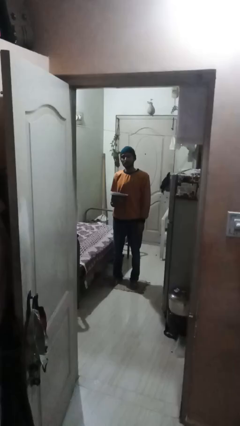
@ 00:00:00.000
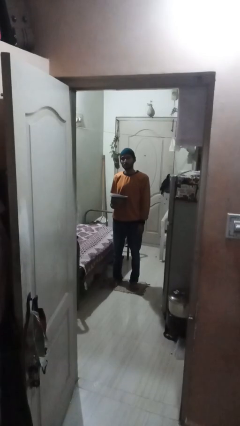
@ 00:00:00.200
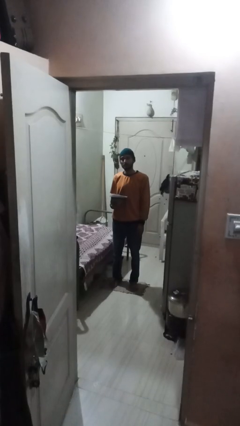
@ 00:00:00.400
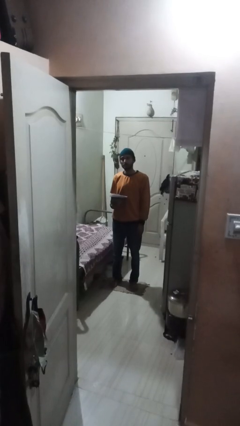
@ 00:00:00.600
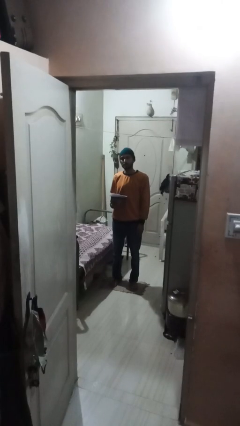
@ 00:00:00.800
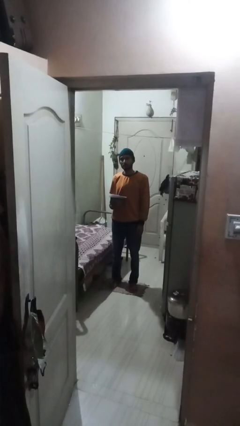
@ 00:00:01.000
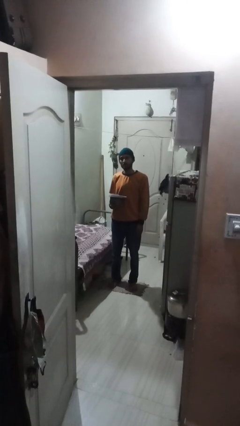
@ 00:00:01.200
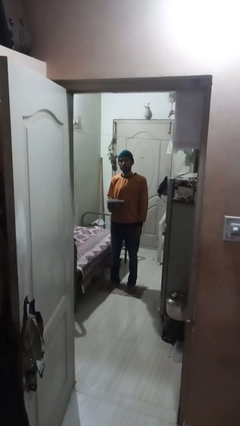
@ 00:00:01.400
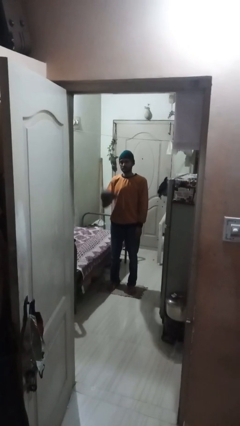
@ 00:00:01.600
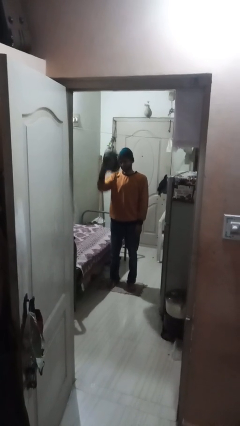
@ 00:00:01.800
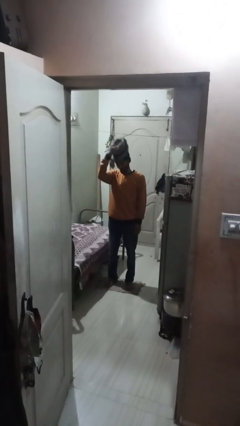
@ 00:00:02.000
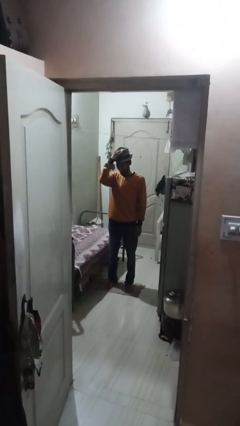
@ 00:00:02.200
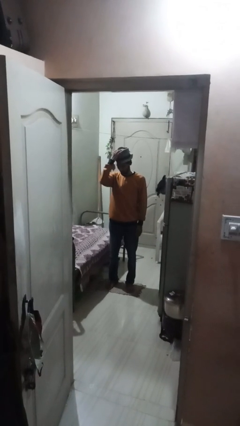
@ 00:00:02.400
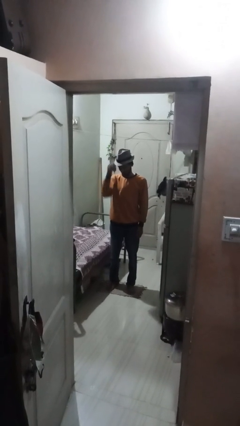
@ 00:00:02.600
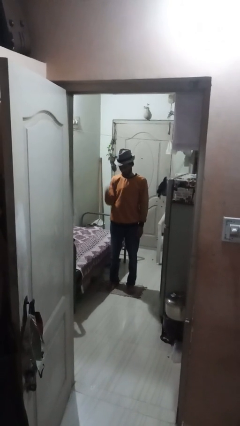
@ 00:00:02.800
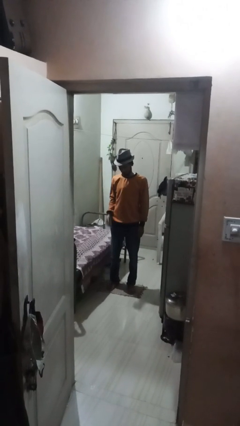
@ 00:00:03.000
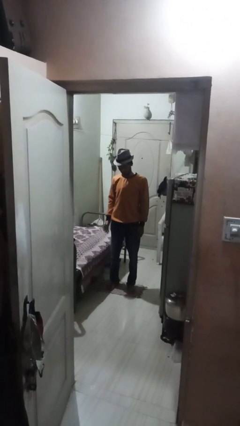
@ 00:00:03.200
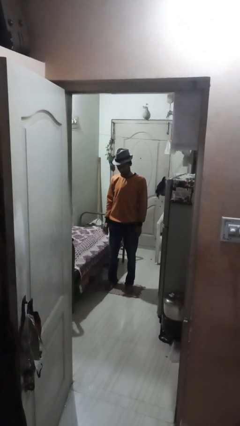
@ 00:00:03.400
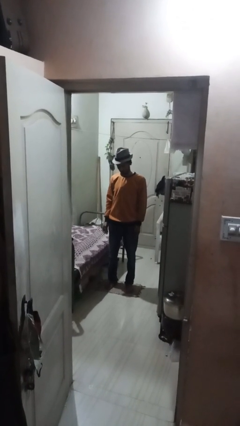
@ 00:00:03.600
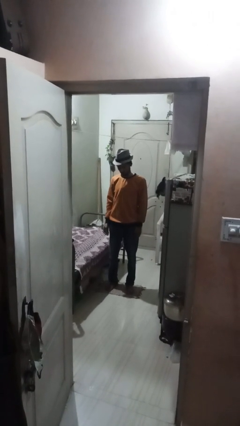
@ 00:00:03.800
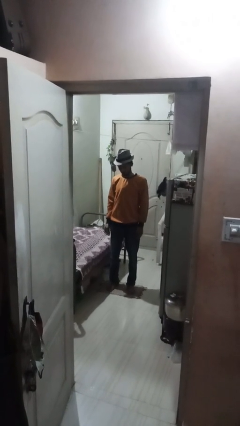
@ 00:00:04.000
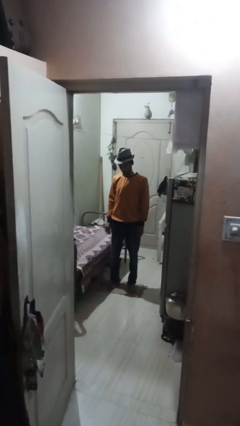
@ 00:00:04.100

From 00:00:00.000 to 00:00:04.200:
person puts on hat

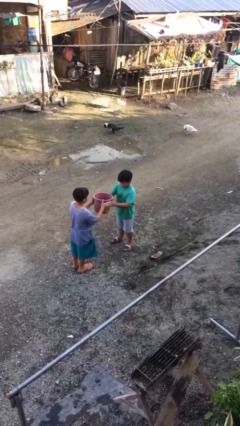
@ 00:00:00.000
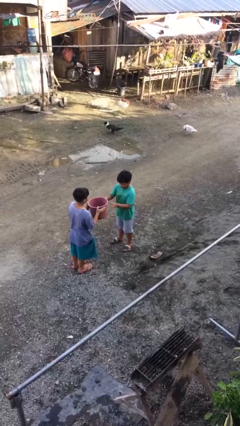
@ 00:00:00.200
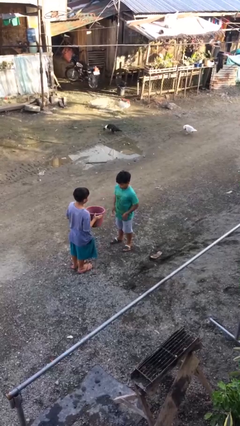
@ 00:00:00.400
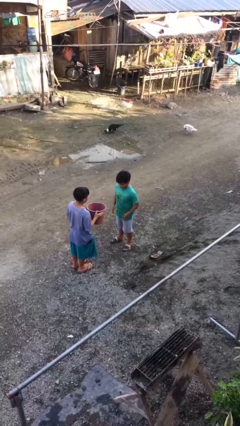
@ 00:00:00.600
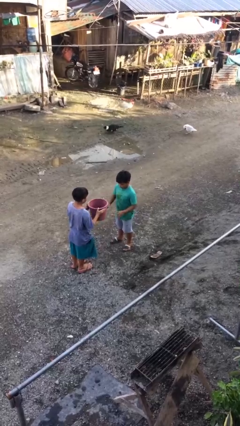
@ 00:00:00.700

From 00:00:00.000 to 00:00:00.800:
person transfers object to person

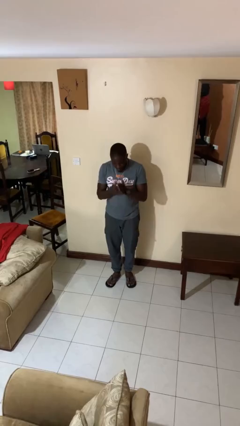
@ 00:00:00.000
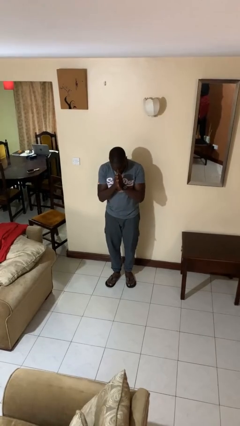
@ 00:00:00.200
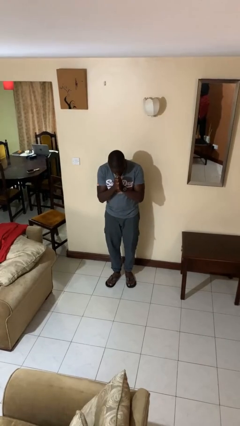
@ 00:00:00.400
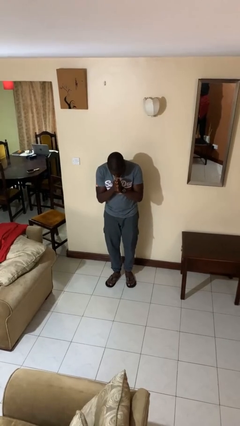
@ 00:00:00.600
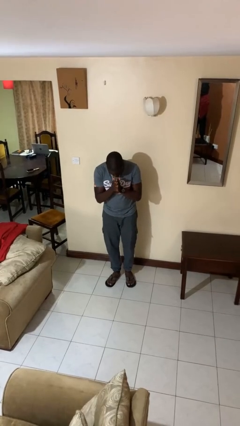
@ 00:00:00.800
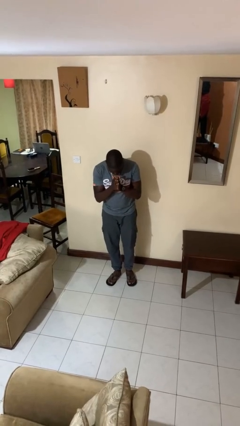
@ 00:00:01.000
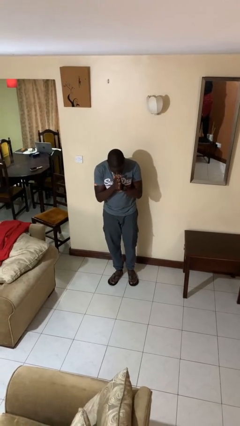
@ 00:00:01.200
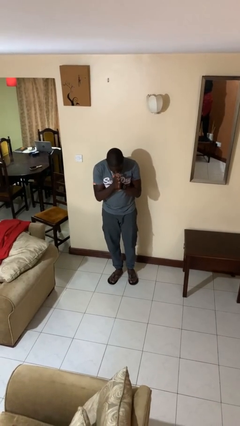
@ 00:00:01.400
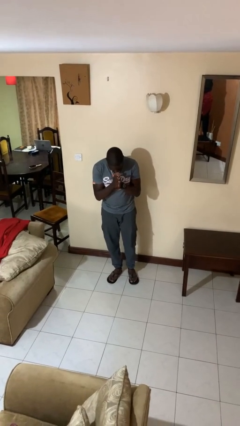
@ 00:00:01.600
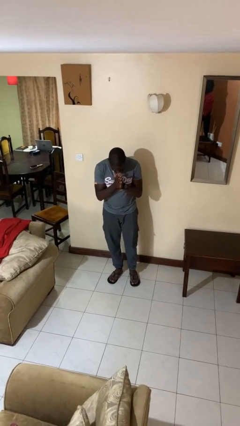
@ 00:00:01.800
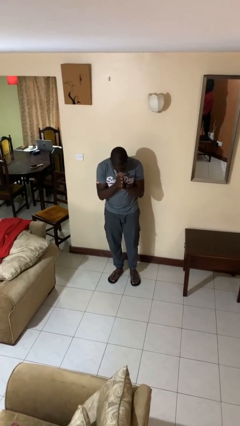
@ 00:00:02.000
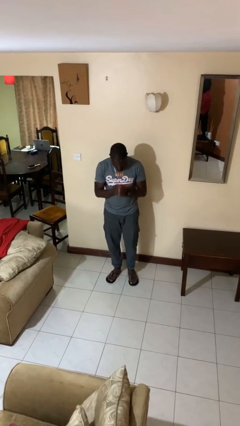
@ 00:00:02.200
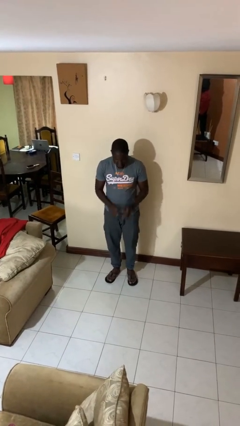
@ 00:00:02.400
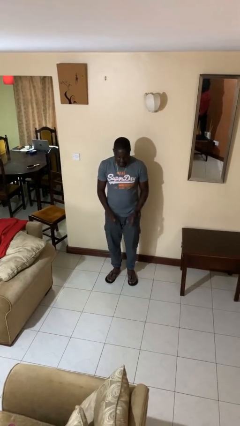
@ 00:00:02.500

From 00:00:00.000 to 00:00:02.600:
person prays

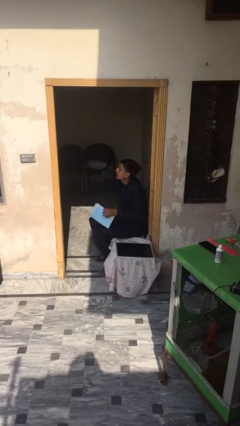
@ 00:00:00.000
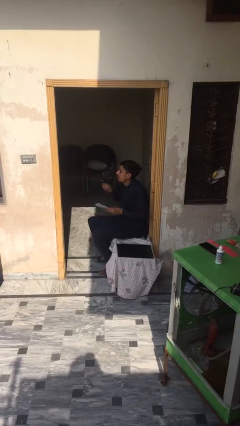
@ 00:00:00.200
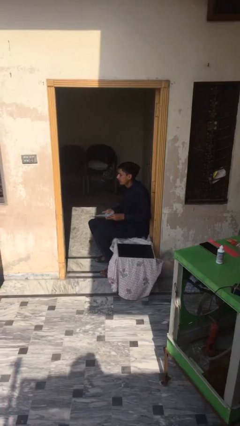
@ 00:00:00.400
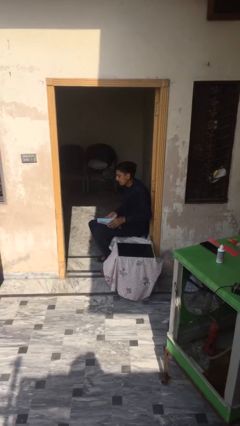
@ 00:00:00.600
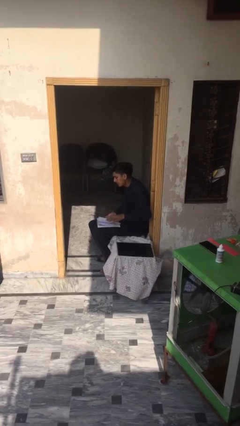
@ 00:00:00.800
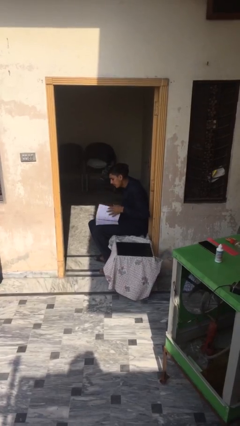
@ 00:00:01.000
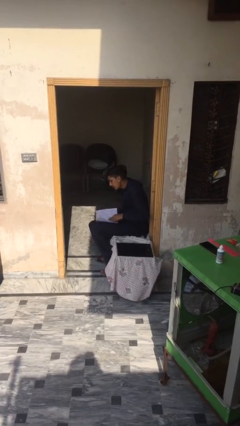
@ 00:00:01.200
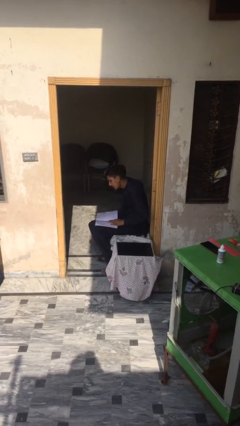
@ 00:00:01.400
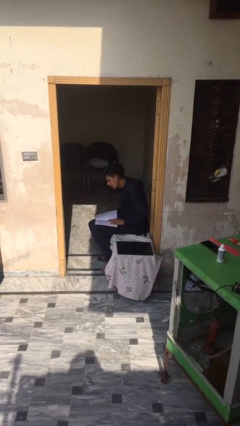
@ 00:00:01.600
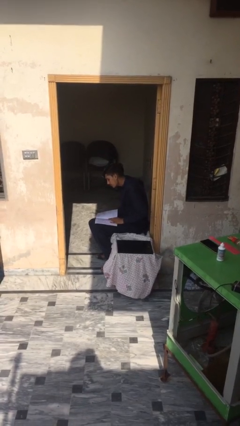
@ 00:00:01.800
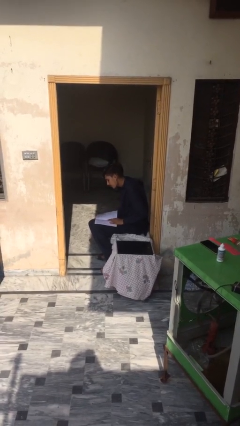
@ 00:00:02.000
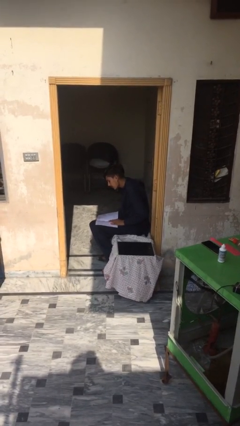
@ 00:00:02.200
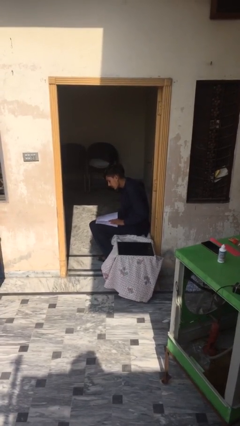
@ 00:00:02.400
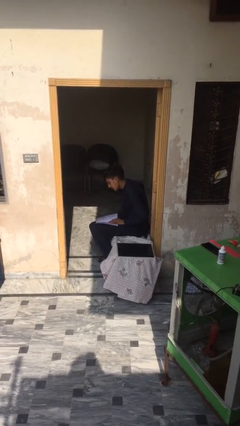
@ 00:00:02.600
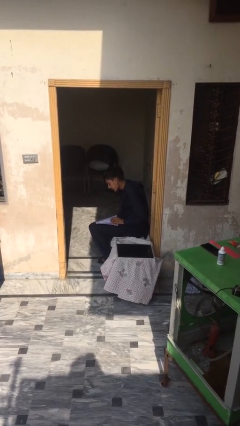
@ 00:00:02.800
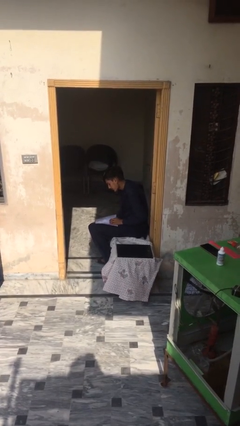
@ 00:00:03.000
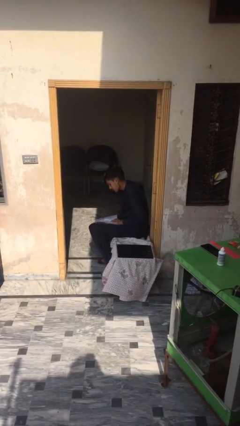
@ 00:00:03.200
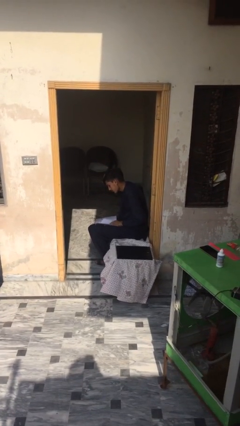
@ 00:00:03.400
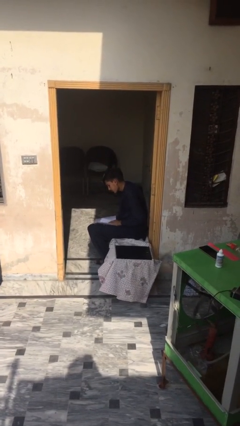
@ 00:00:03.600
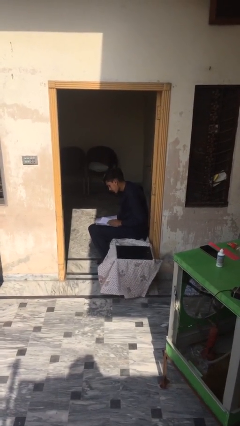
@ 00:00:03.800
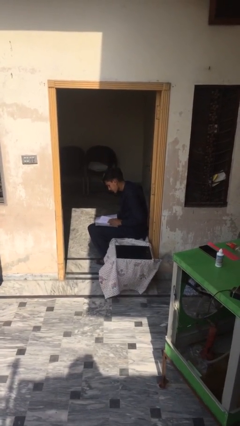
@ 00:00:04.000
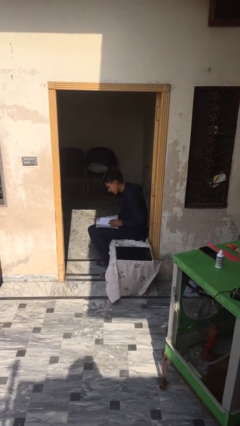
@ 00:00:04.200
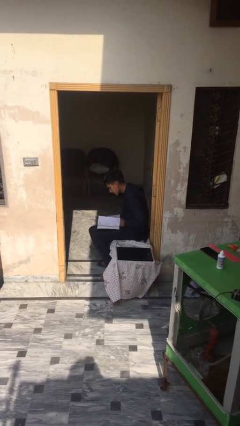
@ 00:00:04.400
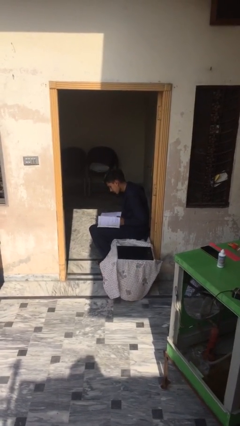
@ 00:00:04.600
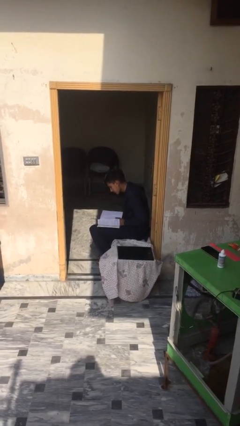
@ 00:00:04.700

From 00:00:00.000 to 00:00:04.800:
person reads document

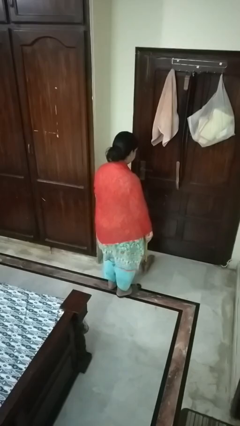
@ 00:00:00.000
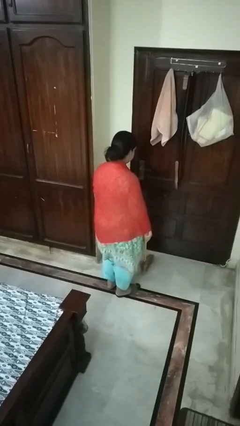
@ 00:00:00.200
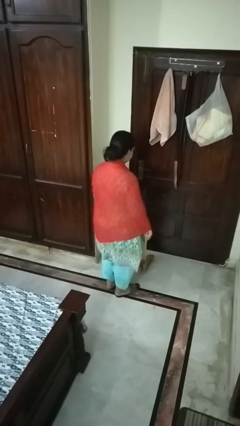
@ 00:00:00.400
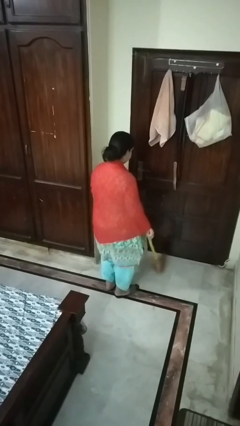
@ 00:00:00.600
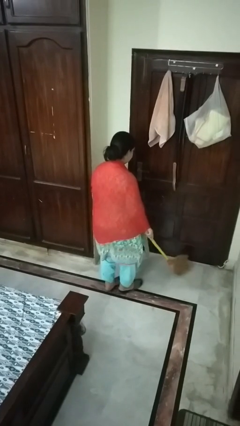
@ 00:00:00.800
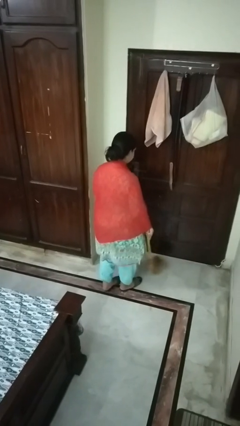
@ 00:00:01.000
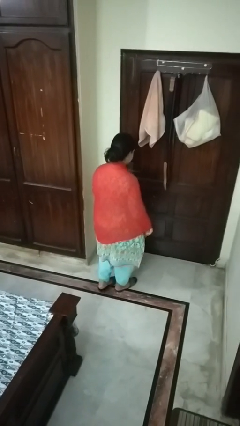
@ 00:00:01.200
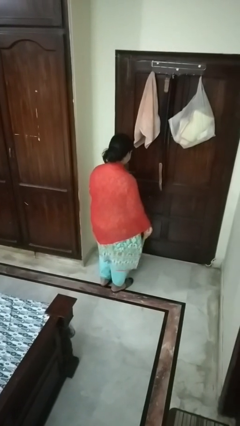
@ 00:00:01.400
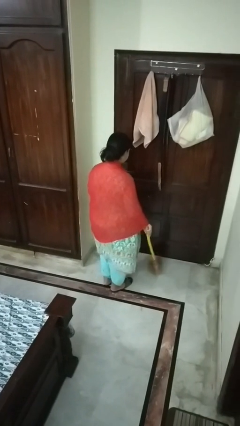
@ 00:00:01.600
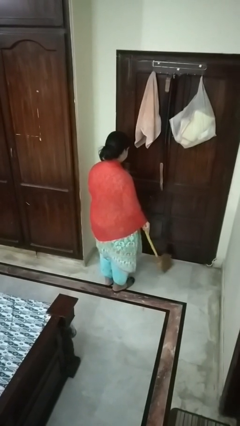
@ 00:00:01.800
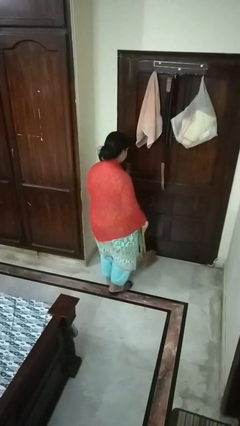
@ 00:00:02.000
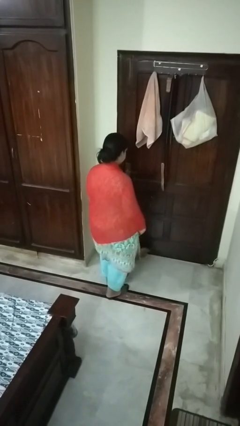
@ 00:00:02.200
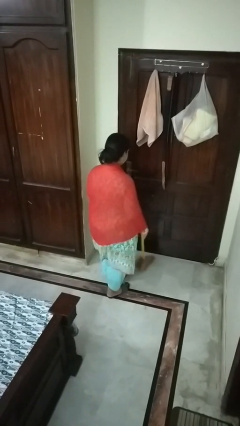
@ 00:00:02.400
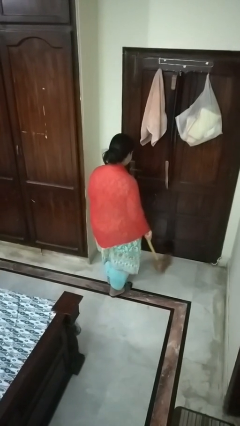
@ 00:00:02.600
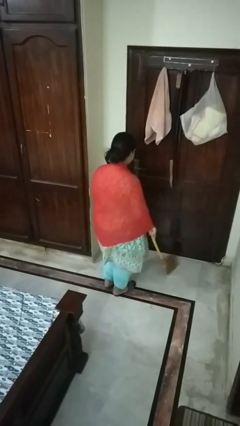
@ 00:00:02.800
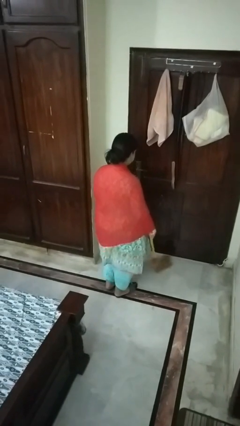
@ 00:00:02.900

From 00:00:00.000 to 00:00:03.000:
person sweeps floor

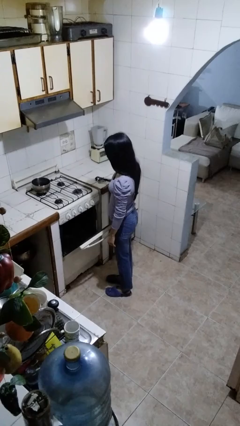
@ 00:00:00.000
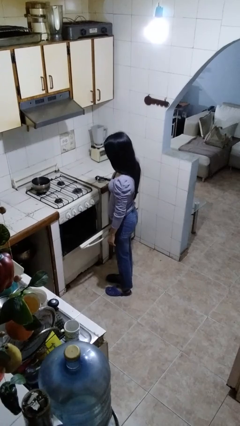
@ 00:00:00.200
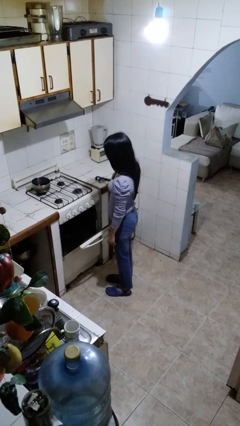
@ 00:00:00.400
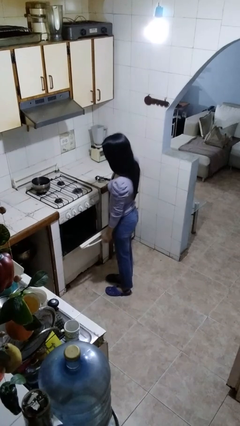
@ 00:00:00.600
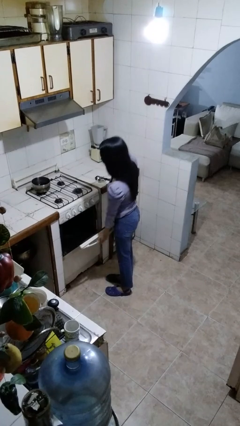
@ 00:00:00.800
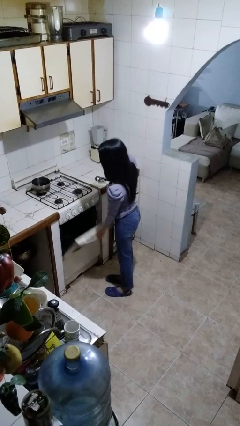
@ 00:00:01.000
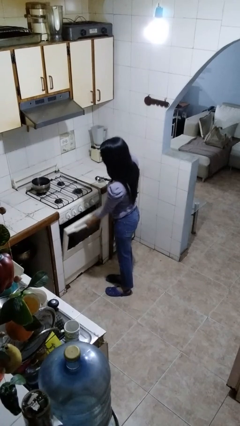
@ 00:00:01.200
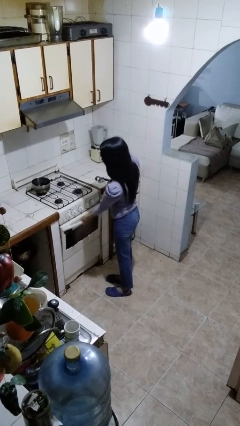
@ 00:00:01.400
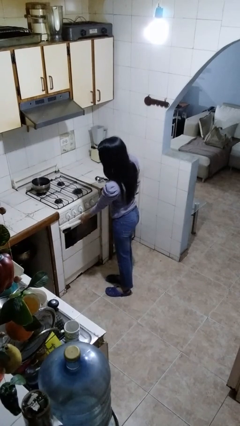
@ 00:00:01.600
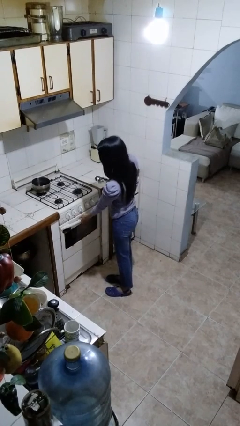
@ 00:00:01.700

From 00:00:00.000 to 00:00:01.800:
person closes oven door
